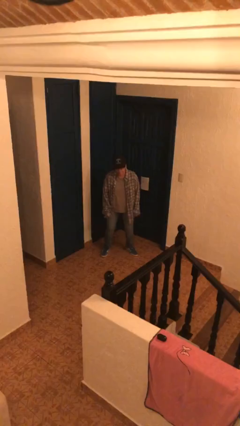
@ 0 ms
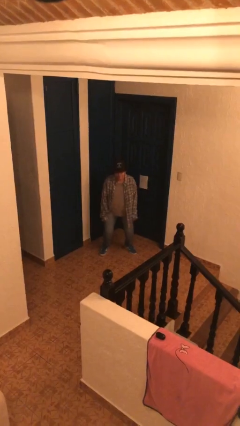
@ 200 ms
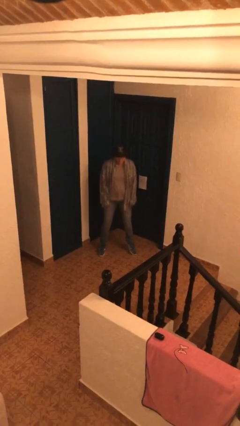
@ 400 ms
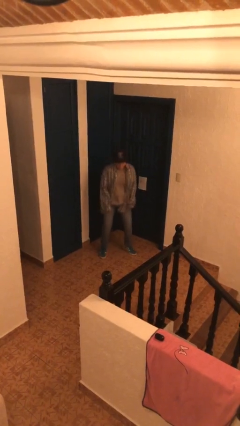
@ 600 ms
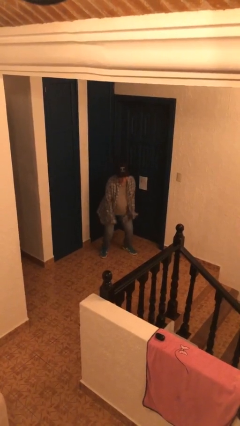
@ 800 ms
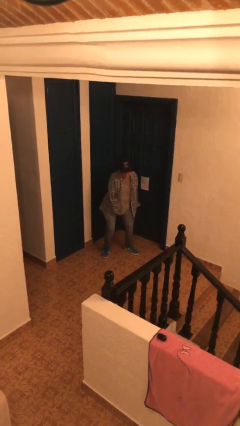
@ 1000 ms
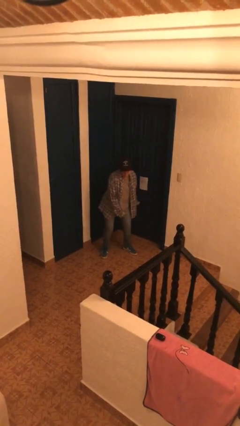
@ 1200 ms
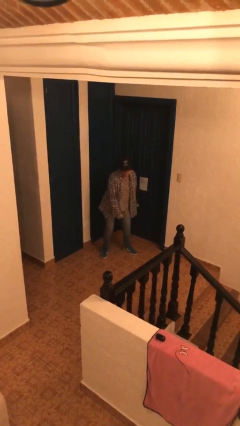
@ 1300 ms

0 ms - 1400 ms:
person jumps

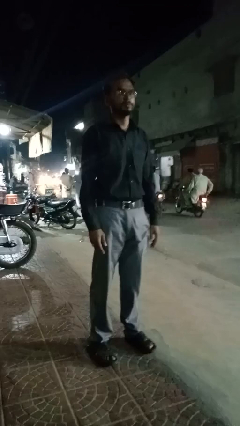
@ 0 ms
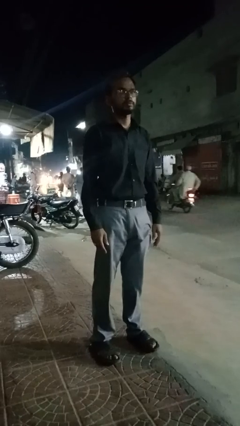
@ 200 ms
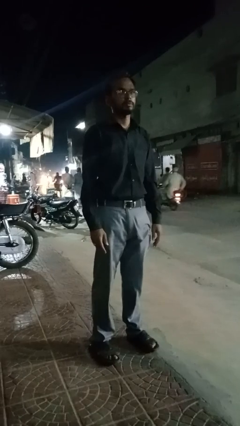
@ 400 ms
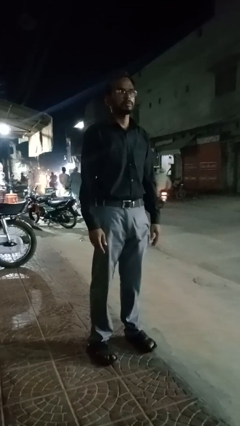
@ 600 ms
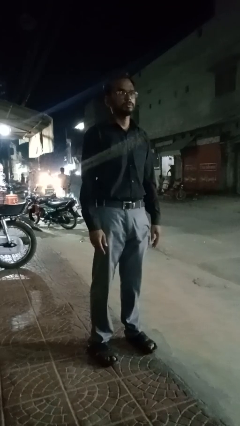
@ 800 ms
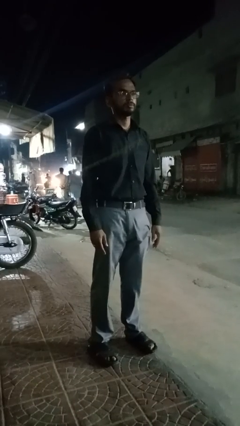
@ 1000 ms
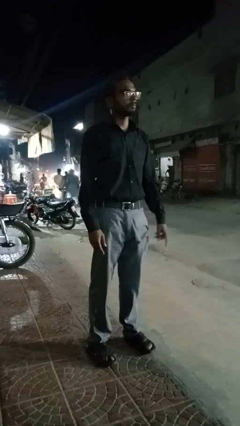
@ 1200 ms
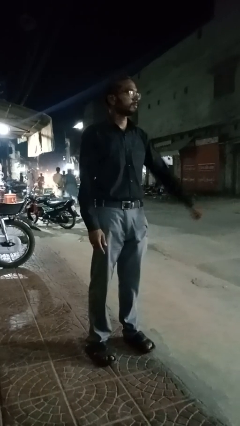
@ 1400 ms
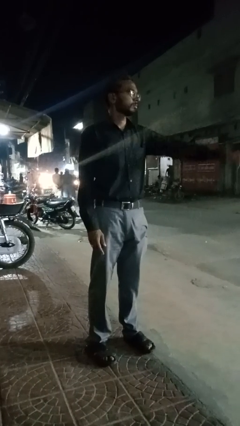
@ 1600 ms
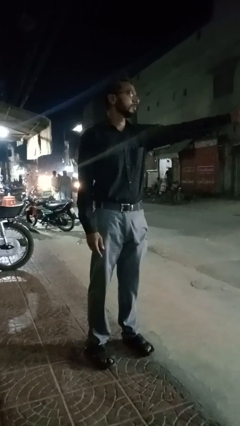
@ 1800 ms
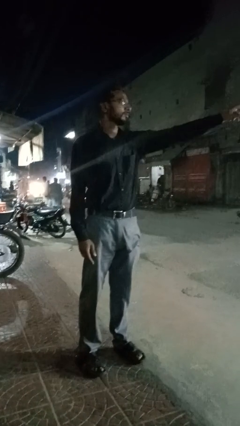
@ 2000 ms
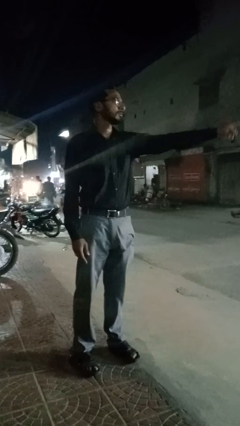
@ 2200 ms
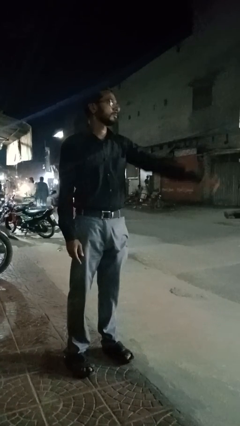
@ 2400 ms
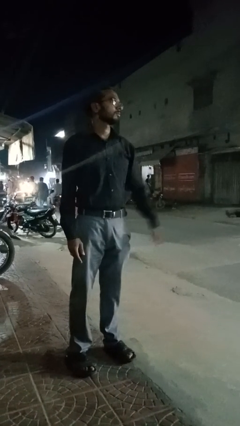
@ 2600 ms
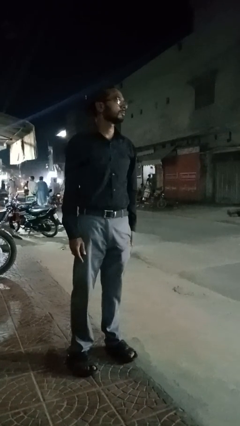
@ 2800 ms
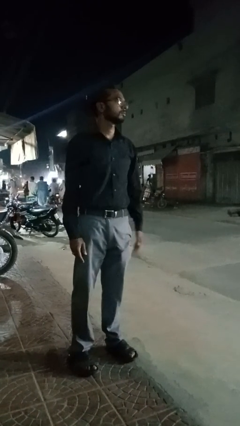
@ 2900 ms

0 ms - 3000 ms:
person points at person

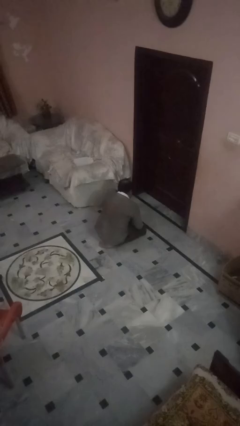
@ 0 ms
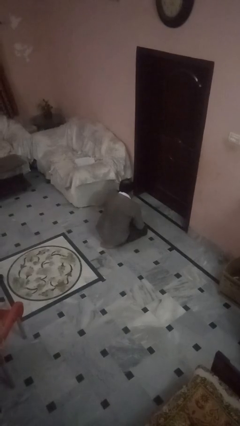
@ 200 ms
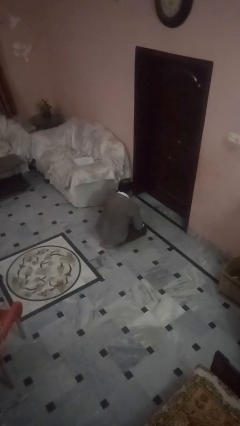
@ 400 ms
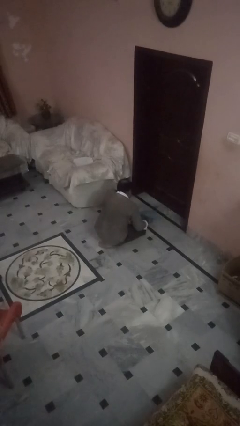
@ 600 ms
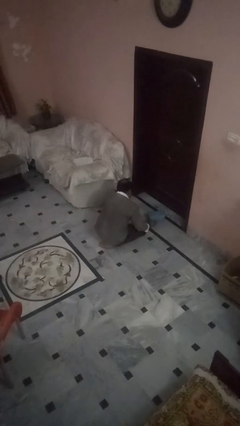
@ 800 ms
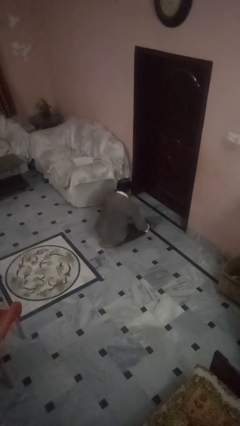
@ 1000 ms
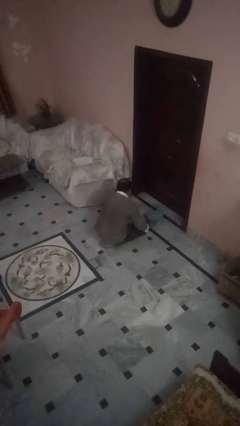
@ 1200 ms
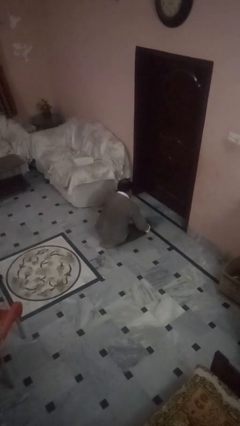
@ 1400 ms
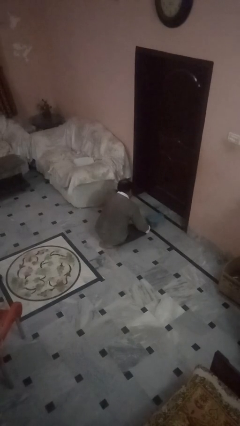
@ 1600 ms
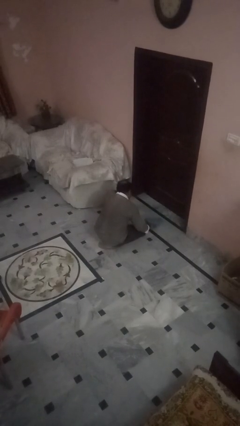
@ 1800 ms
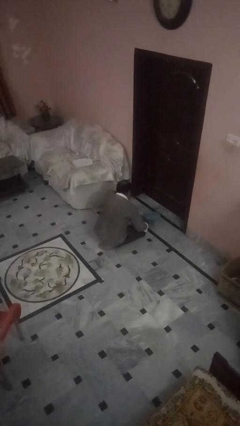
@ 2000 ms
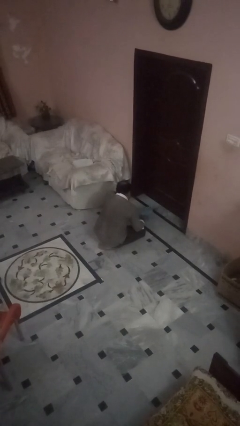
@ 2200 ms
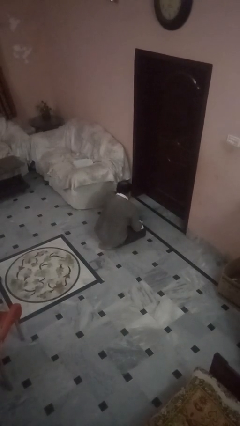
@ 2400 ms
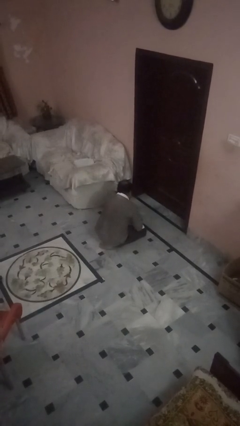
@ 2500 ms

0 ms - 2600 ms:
person swats bug

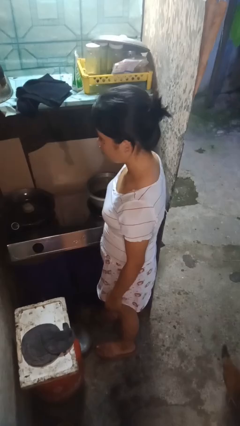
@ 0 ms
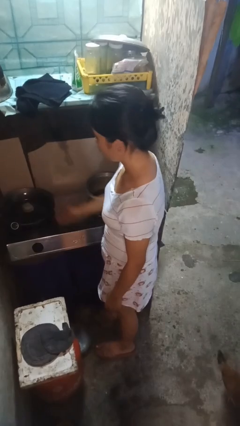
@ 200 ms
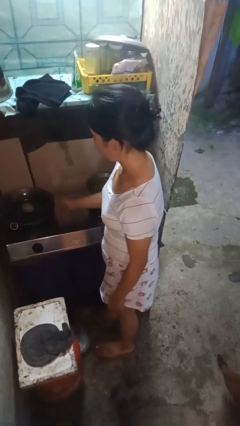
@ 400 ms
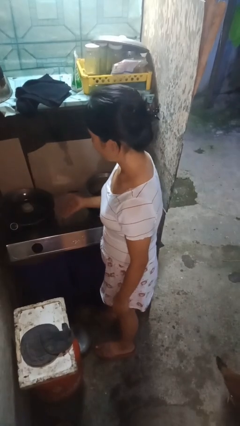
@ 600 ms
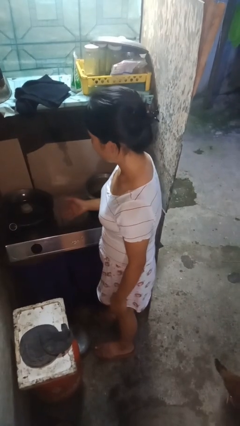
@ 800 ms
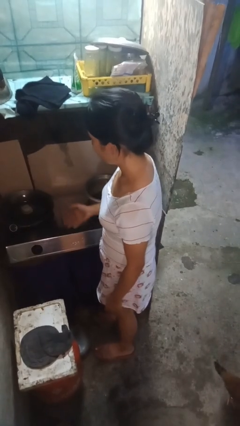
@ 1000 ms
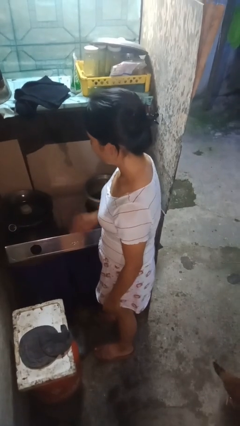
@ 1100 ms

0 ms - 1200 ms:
person burns hand

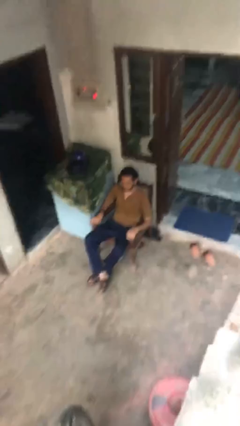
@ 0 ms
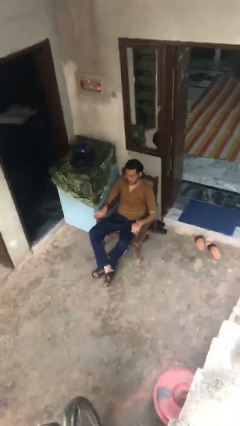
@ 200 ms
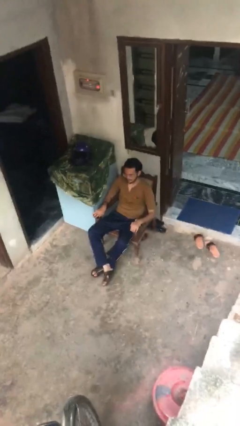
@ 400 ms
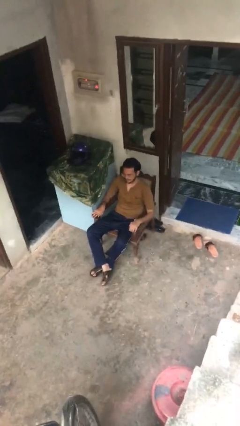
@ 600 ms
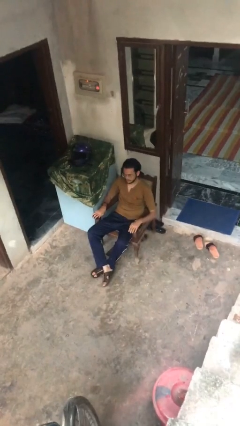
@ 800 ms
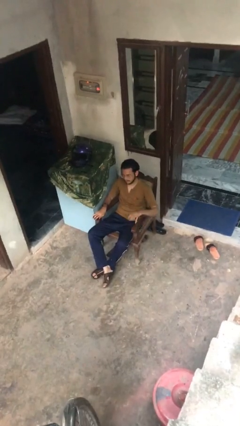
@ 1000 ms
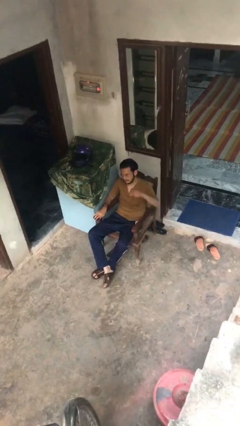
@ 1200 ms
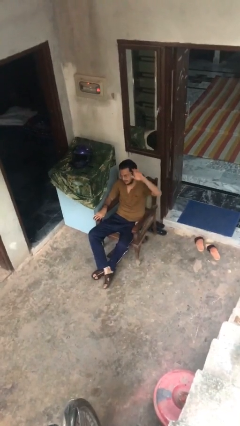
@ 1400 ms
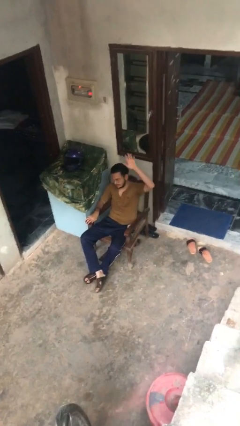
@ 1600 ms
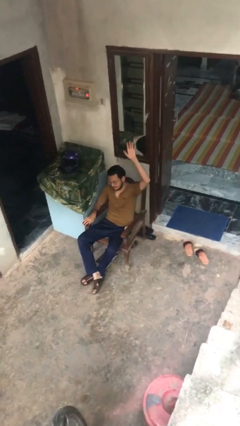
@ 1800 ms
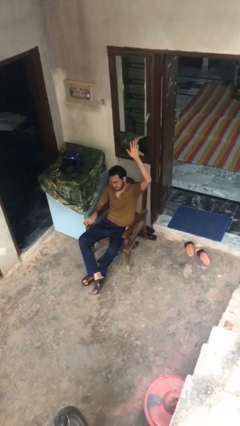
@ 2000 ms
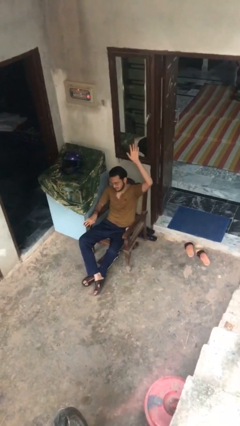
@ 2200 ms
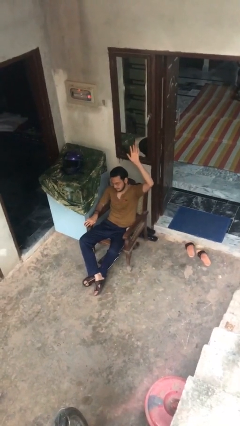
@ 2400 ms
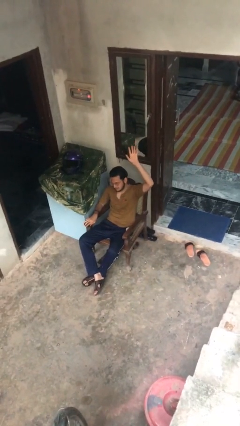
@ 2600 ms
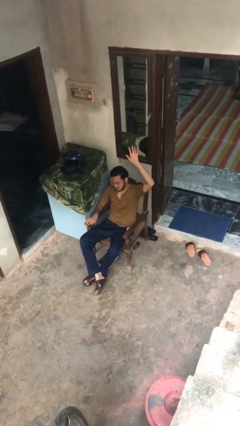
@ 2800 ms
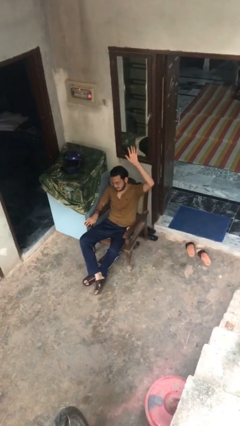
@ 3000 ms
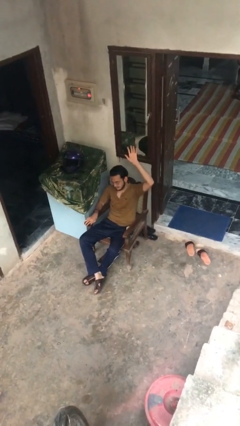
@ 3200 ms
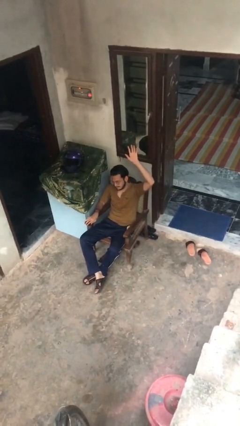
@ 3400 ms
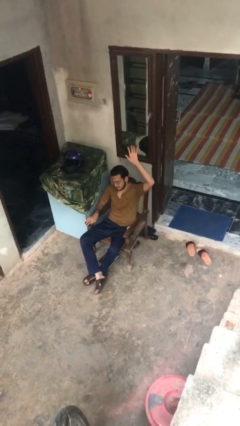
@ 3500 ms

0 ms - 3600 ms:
person gestures raise hand

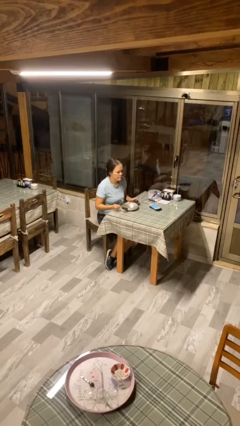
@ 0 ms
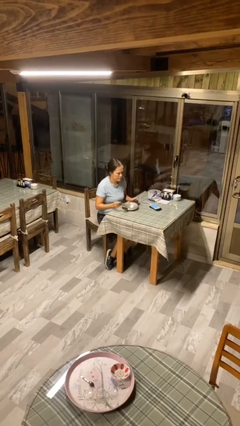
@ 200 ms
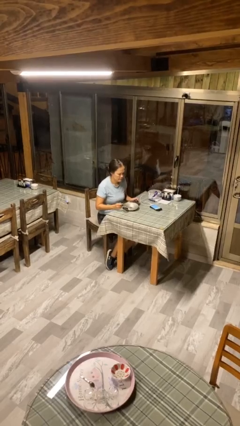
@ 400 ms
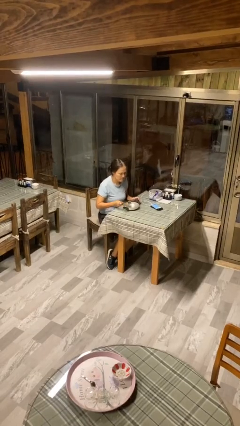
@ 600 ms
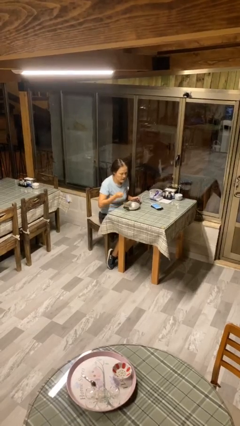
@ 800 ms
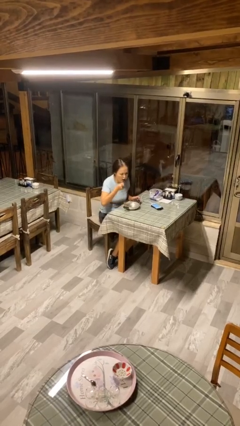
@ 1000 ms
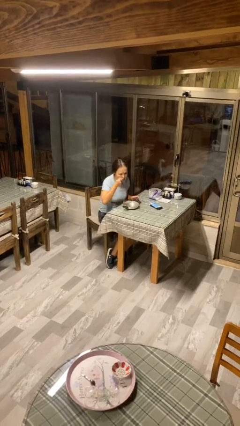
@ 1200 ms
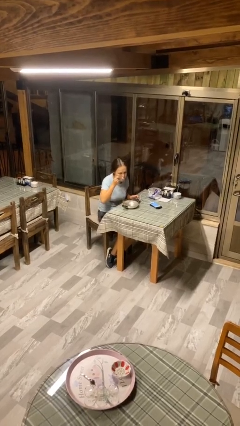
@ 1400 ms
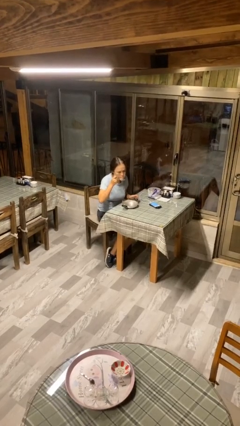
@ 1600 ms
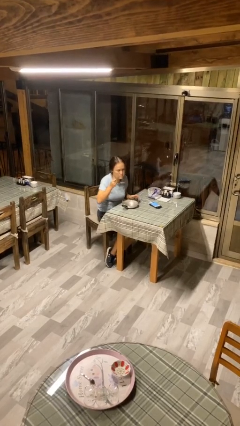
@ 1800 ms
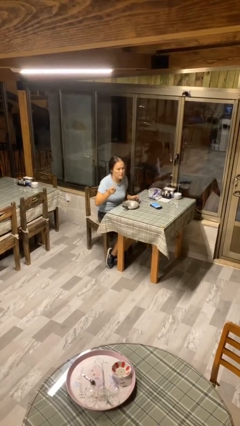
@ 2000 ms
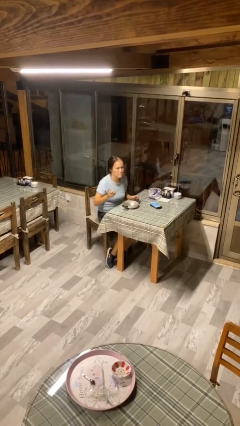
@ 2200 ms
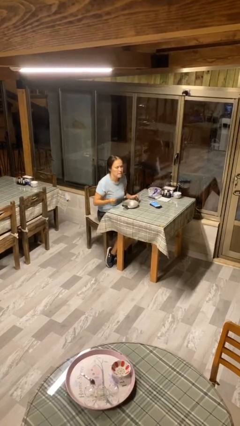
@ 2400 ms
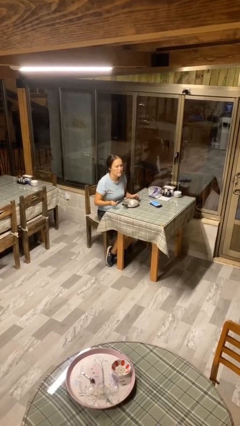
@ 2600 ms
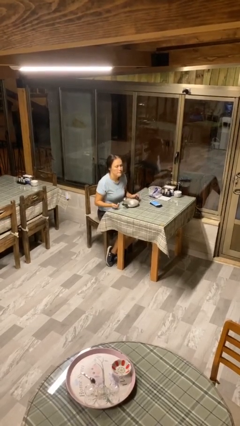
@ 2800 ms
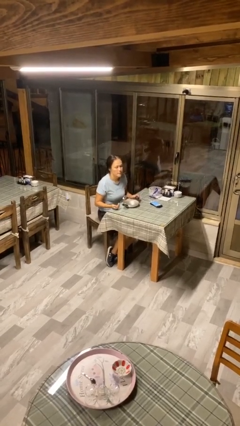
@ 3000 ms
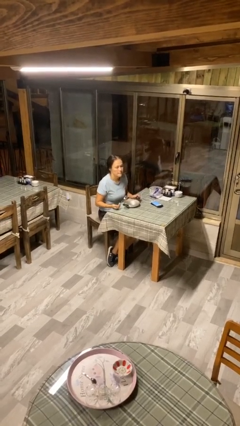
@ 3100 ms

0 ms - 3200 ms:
person eats with utensil

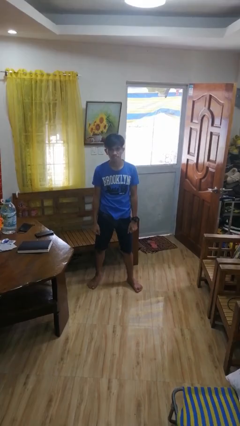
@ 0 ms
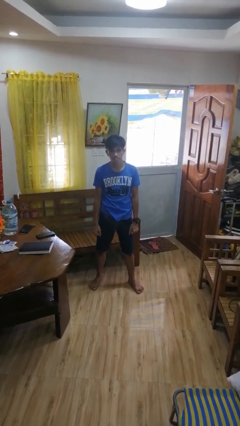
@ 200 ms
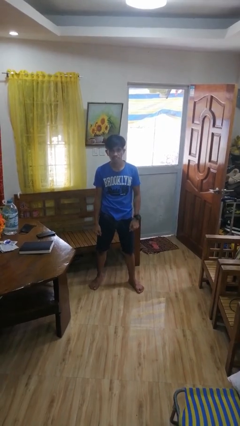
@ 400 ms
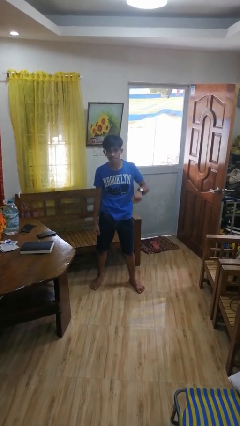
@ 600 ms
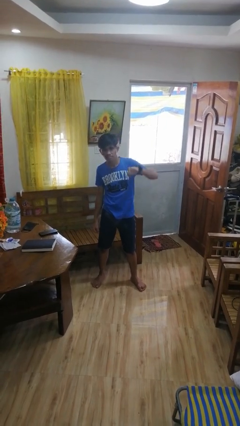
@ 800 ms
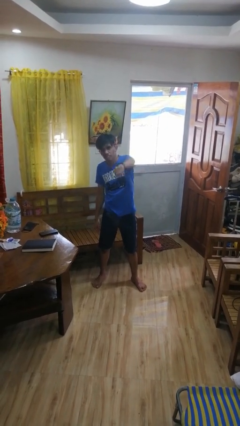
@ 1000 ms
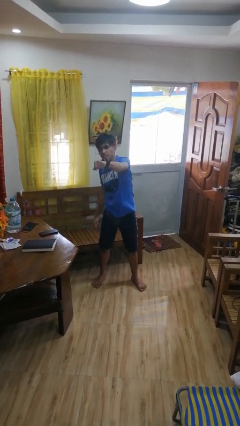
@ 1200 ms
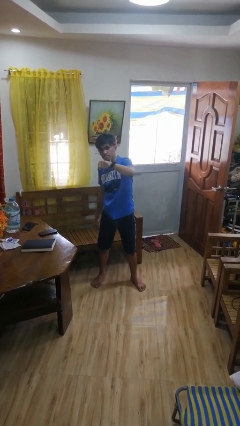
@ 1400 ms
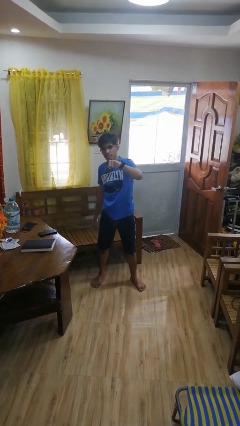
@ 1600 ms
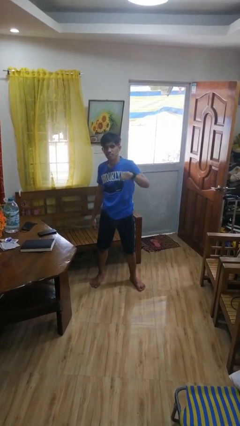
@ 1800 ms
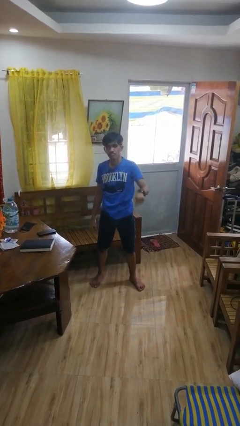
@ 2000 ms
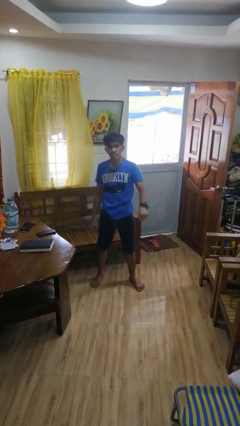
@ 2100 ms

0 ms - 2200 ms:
person punches
